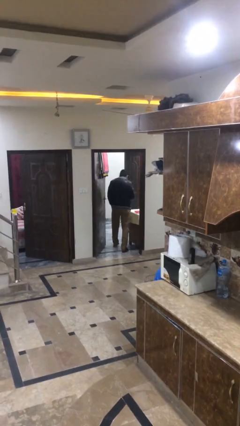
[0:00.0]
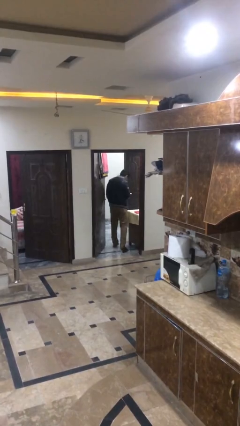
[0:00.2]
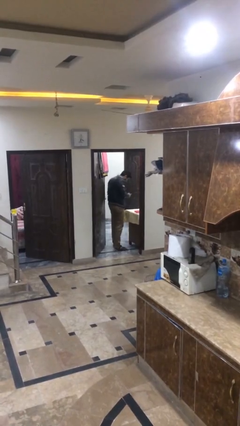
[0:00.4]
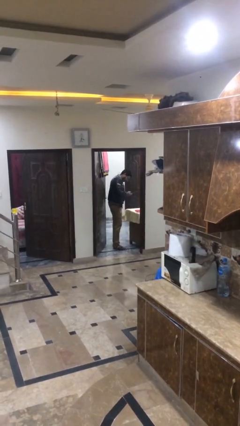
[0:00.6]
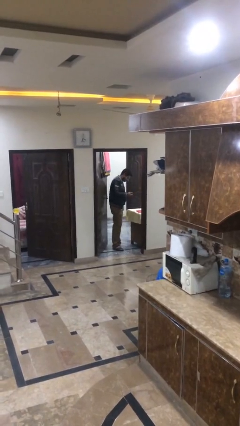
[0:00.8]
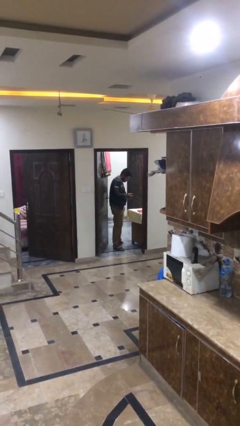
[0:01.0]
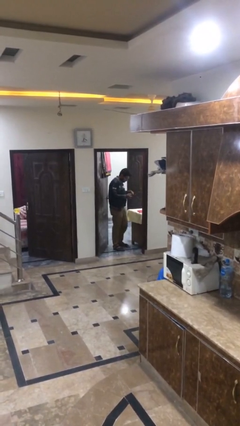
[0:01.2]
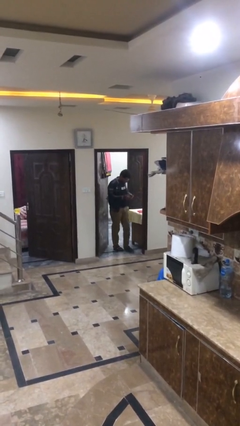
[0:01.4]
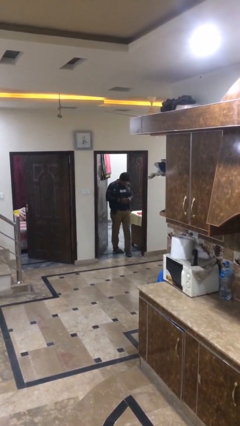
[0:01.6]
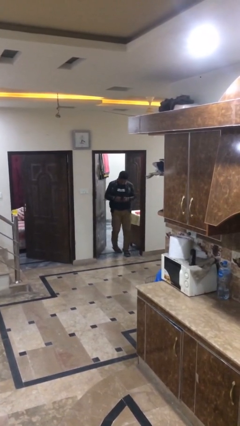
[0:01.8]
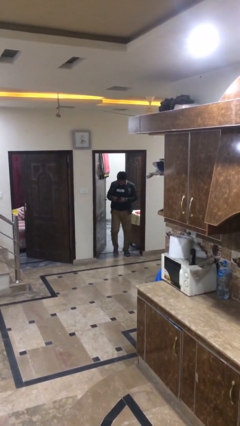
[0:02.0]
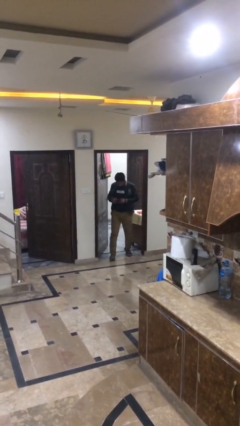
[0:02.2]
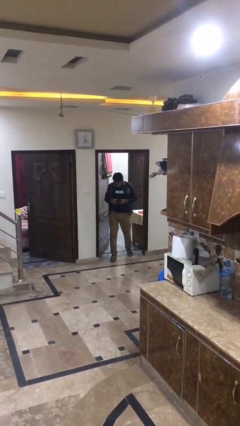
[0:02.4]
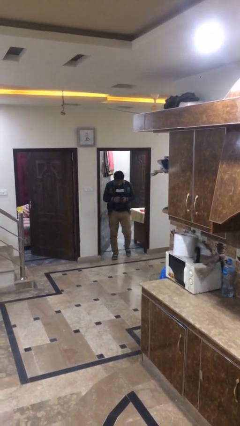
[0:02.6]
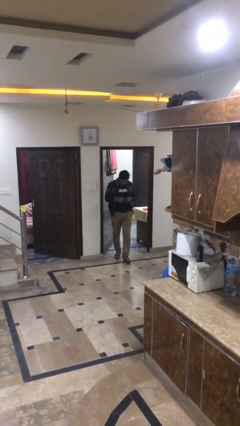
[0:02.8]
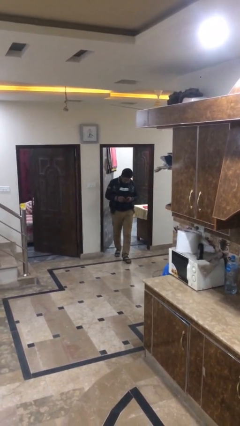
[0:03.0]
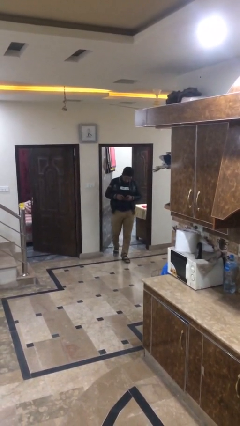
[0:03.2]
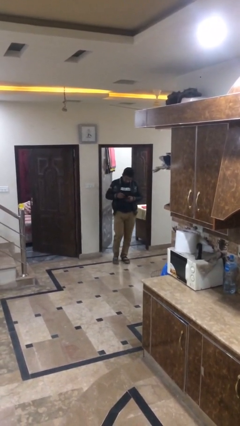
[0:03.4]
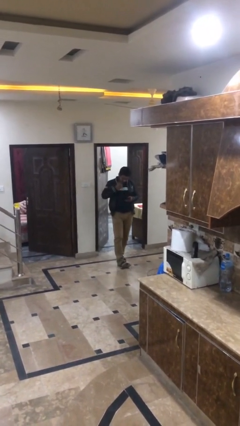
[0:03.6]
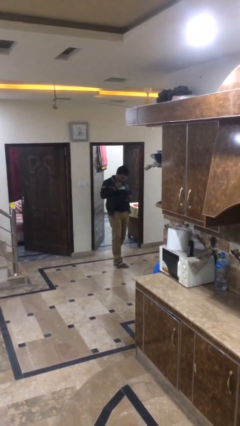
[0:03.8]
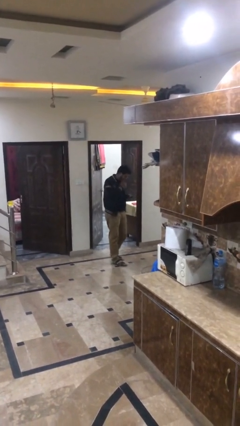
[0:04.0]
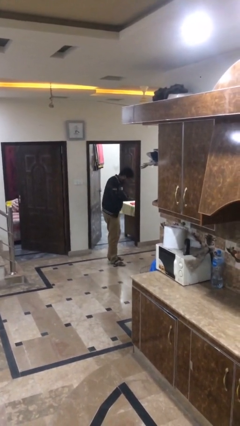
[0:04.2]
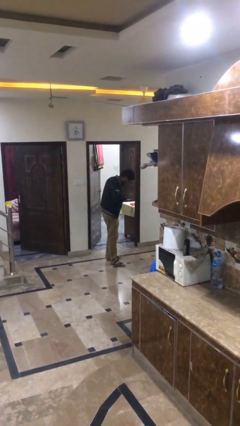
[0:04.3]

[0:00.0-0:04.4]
person exits scene through structure

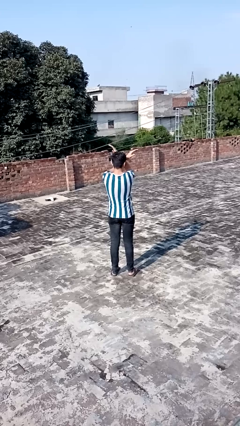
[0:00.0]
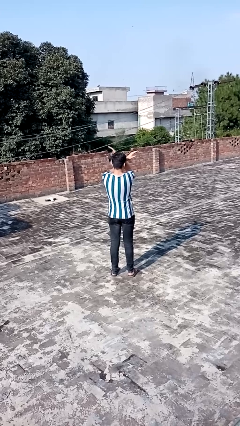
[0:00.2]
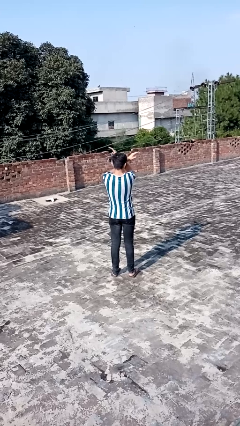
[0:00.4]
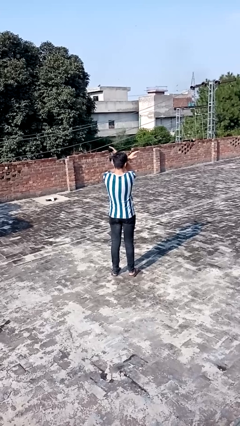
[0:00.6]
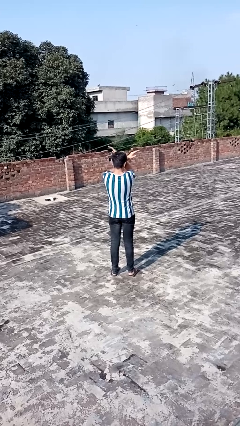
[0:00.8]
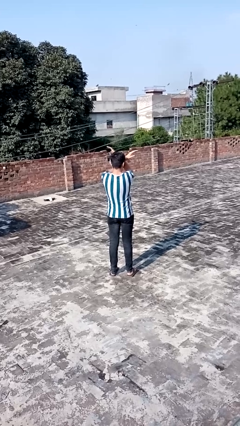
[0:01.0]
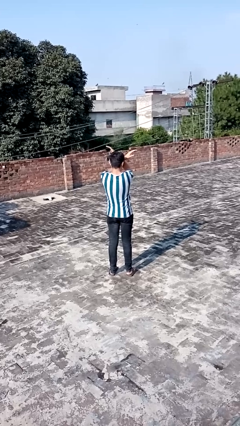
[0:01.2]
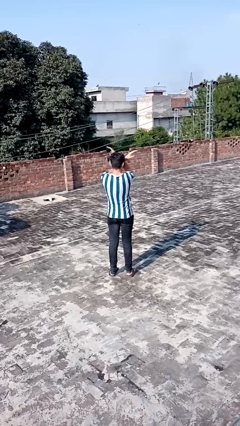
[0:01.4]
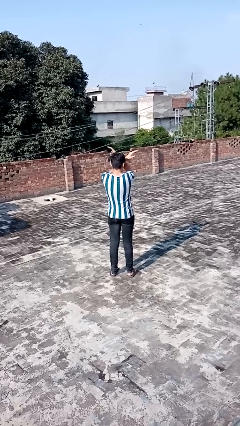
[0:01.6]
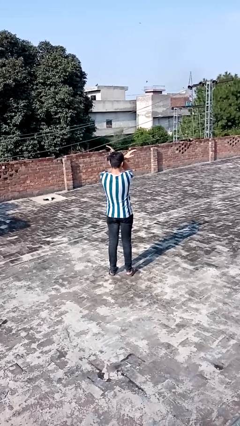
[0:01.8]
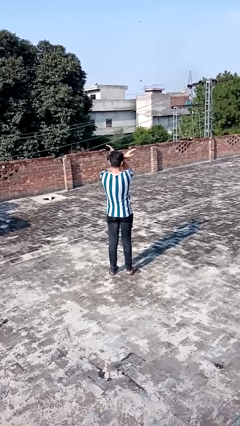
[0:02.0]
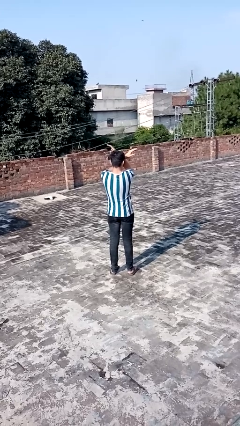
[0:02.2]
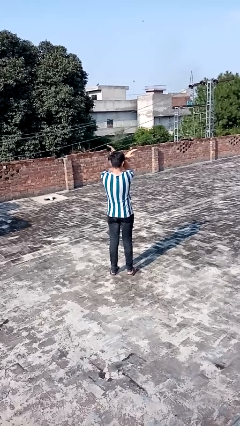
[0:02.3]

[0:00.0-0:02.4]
person gestures arms x

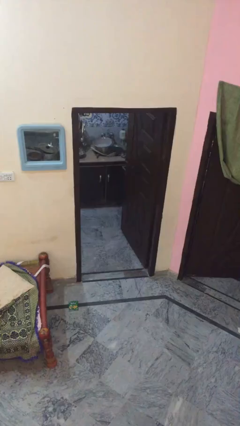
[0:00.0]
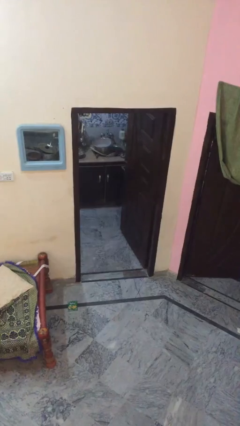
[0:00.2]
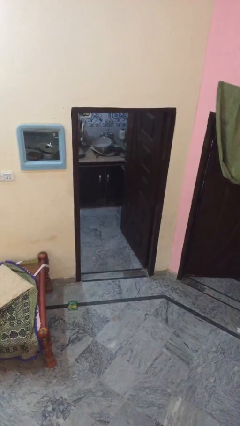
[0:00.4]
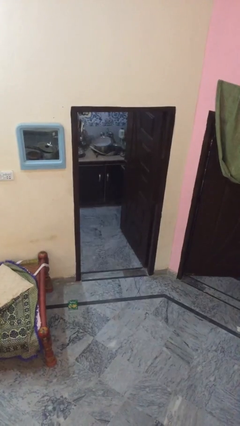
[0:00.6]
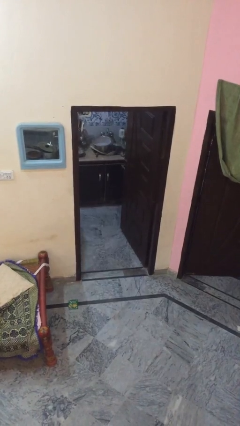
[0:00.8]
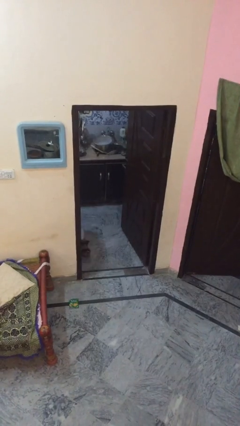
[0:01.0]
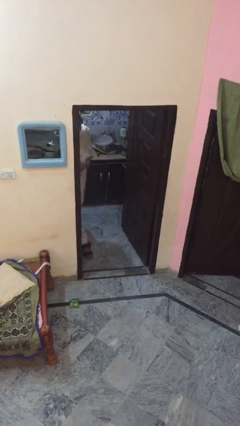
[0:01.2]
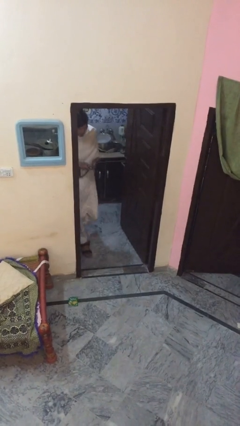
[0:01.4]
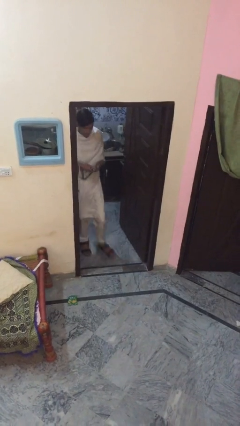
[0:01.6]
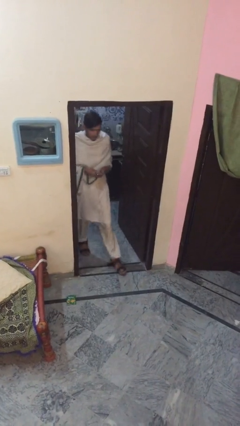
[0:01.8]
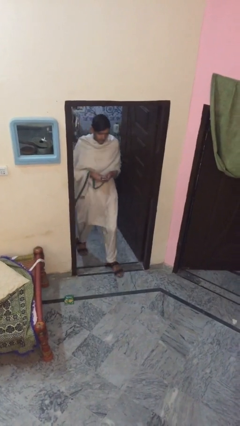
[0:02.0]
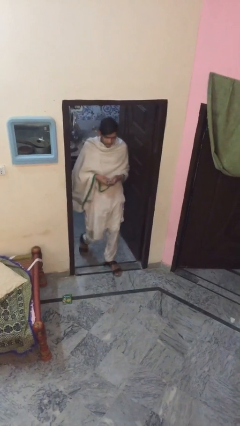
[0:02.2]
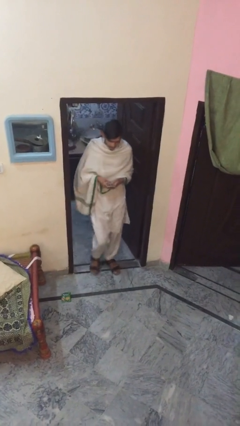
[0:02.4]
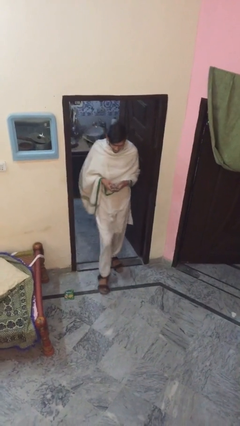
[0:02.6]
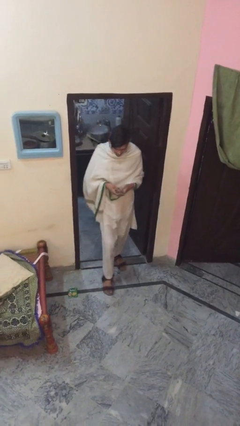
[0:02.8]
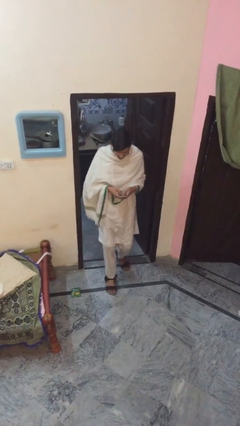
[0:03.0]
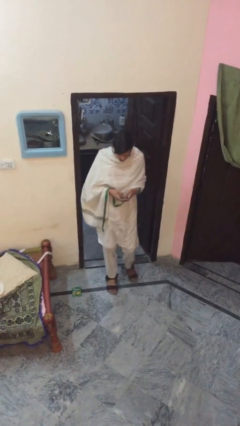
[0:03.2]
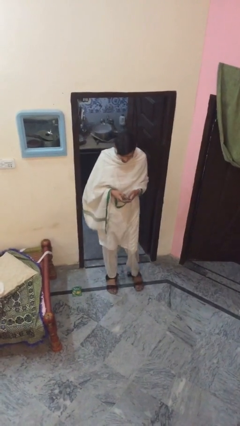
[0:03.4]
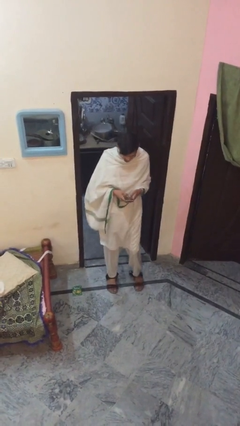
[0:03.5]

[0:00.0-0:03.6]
person enters scene through structure

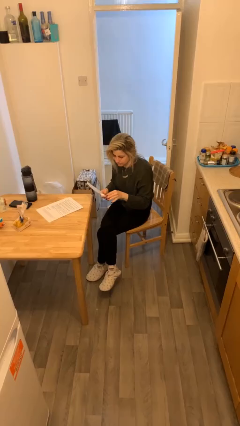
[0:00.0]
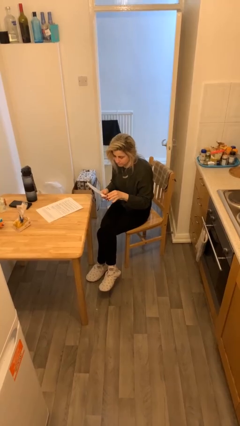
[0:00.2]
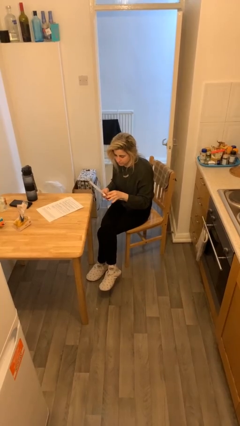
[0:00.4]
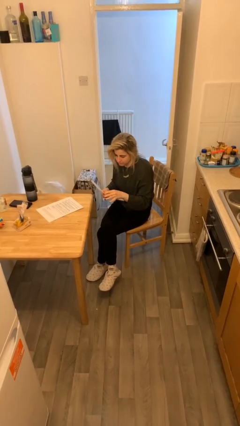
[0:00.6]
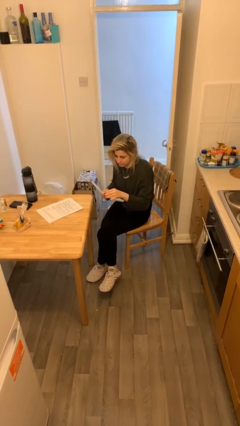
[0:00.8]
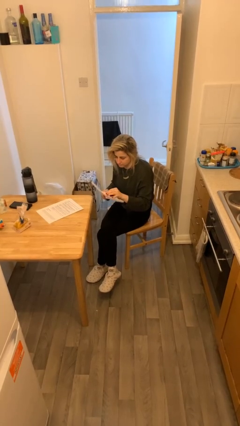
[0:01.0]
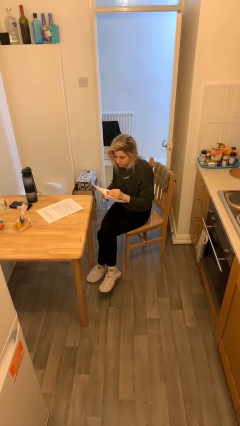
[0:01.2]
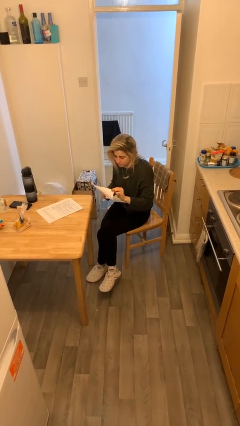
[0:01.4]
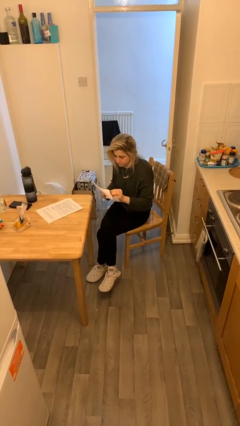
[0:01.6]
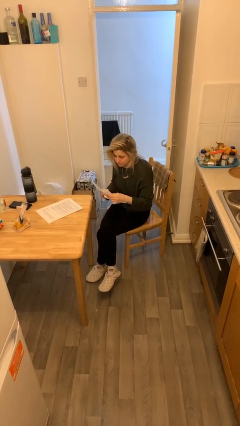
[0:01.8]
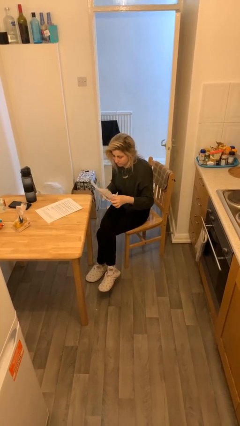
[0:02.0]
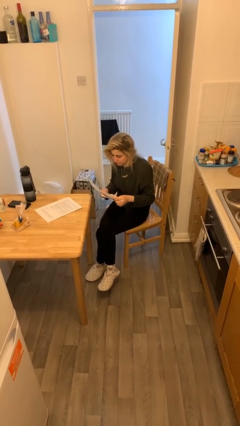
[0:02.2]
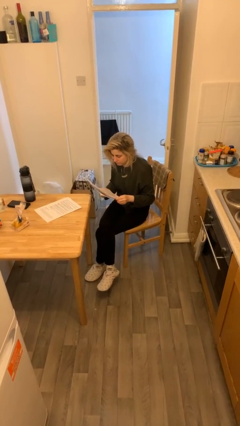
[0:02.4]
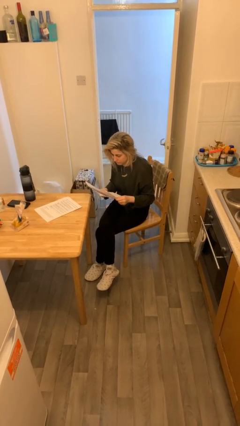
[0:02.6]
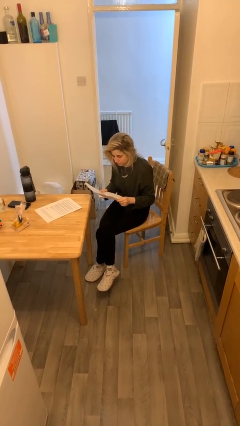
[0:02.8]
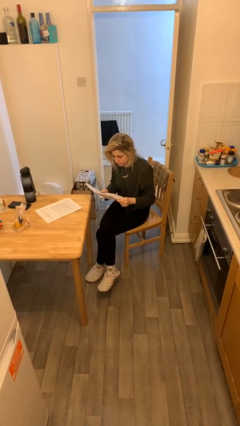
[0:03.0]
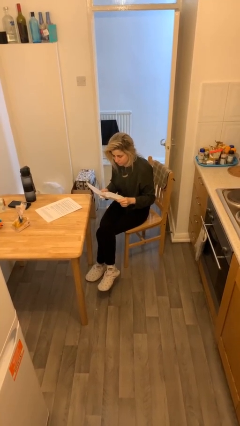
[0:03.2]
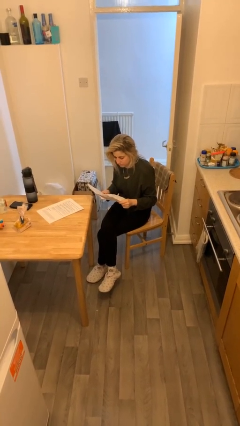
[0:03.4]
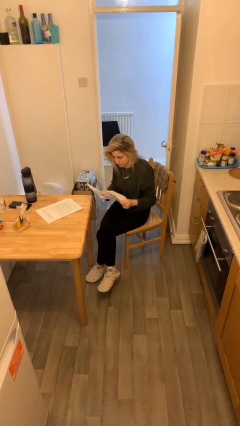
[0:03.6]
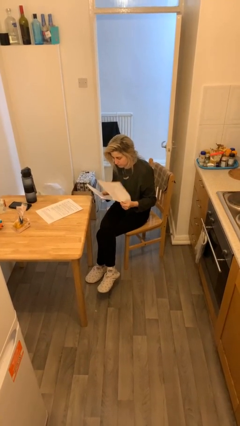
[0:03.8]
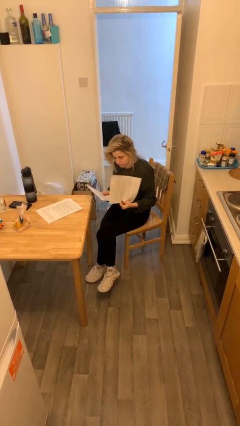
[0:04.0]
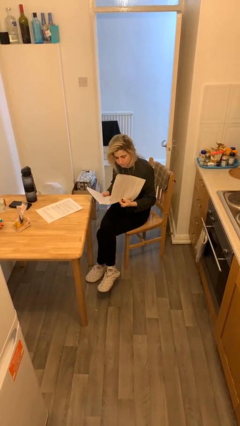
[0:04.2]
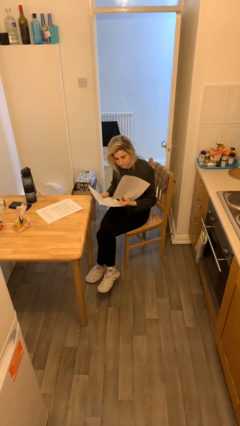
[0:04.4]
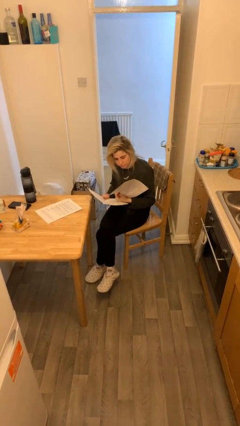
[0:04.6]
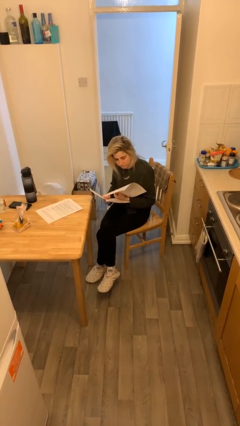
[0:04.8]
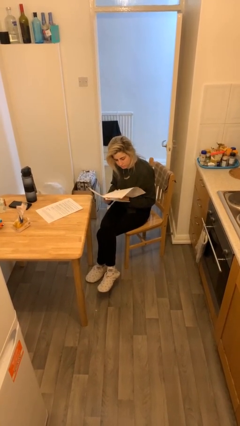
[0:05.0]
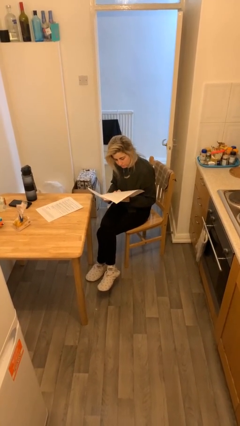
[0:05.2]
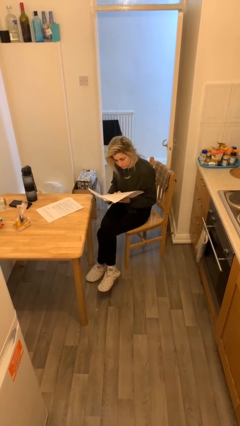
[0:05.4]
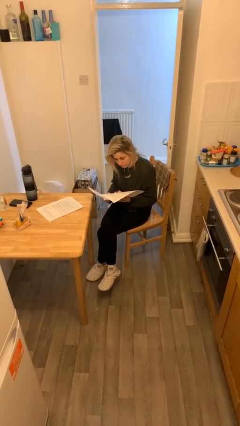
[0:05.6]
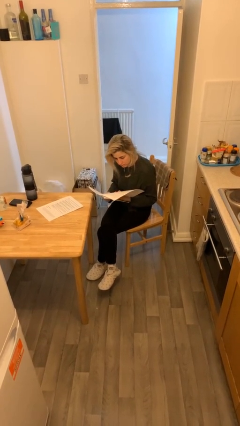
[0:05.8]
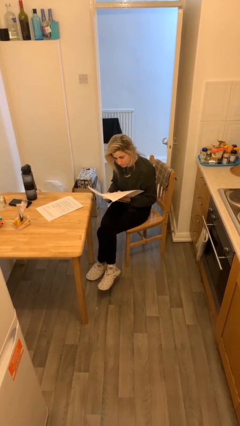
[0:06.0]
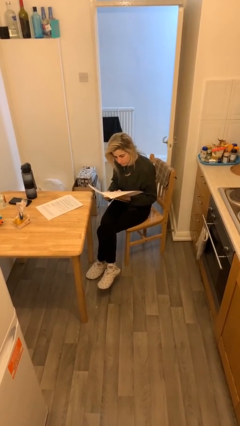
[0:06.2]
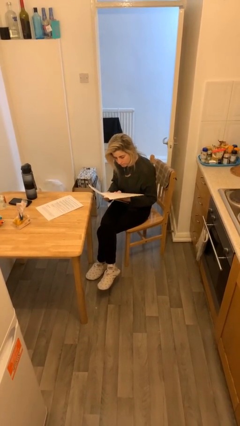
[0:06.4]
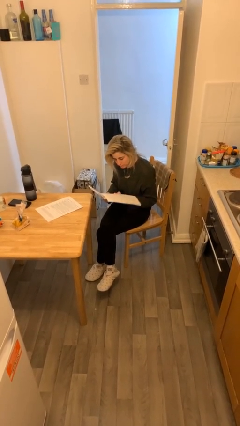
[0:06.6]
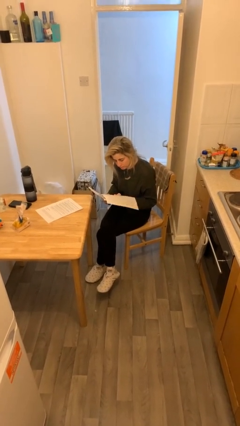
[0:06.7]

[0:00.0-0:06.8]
person reads document

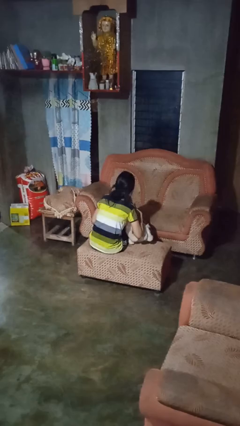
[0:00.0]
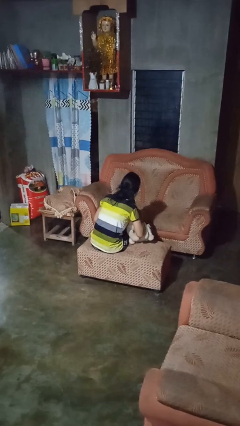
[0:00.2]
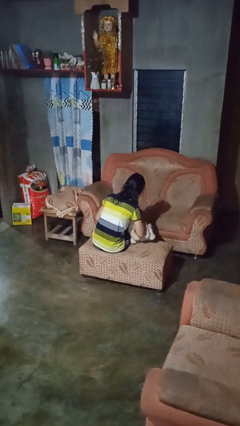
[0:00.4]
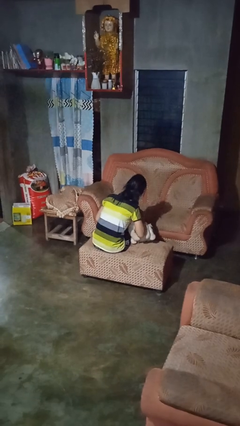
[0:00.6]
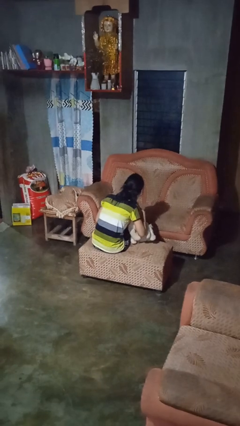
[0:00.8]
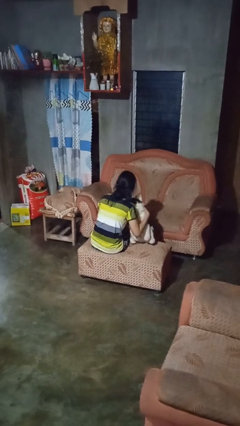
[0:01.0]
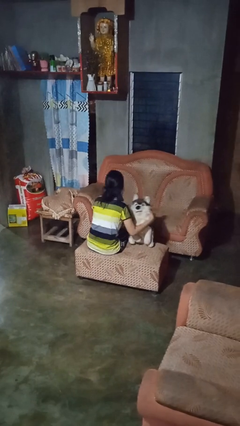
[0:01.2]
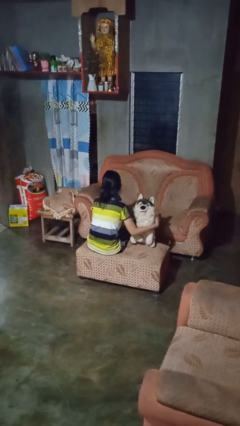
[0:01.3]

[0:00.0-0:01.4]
person hugs stuffed animal
